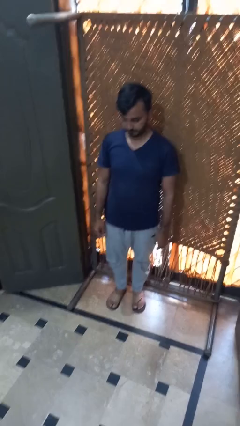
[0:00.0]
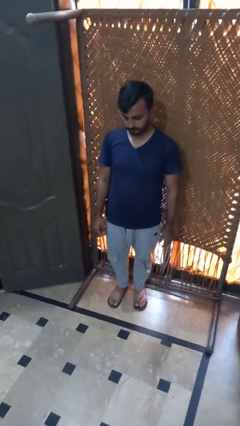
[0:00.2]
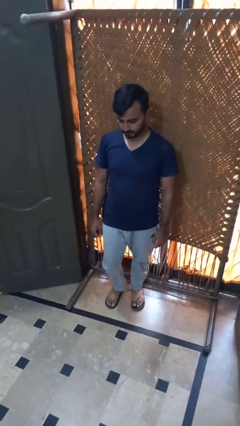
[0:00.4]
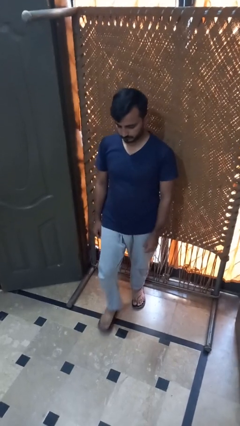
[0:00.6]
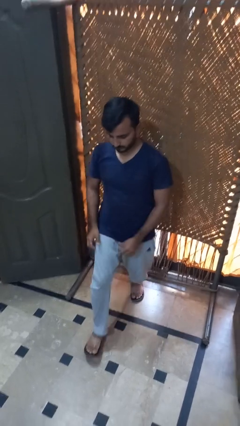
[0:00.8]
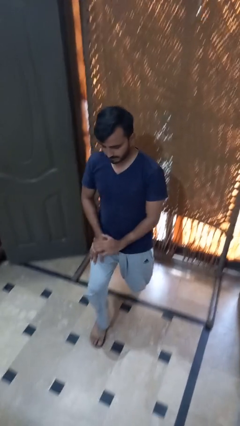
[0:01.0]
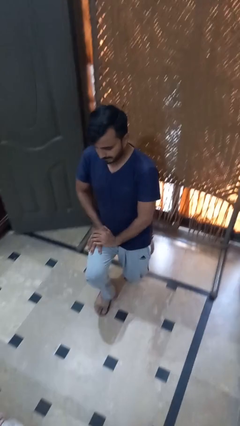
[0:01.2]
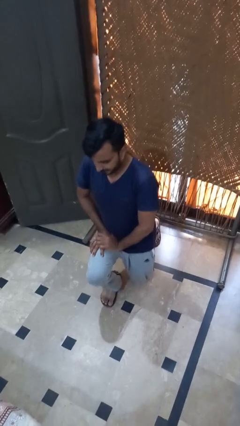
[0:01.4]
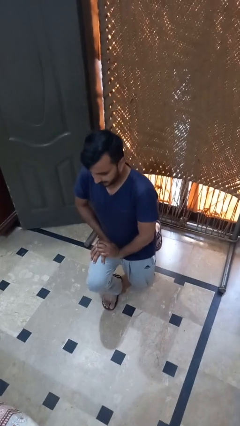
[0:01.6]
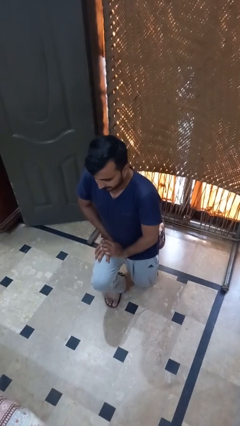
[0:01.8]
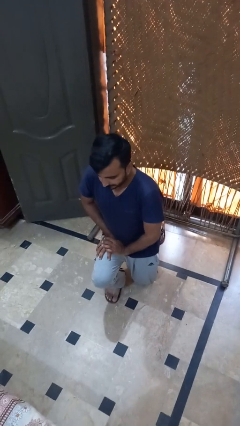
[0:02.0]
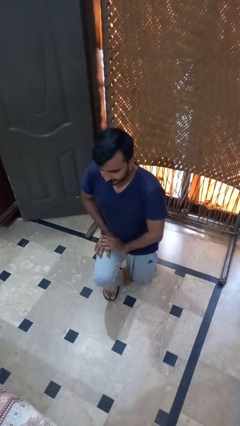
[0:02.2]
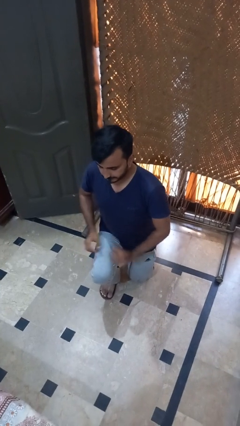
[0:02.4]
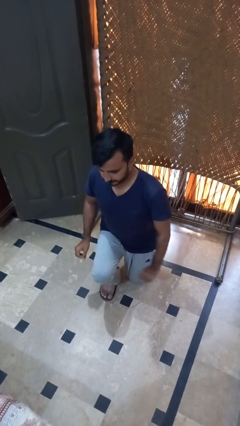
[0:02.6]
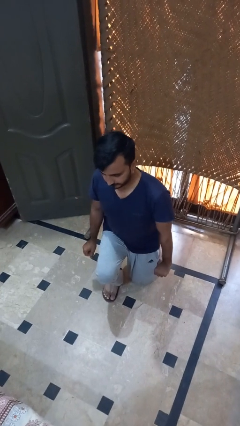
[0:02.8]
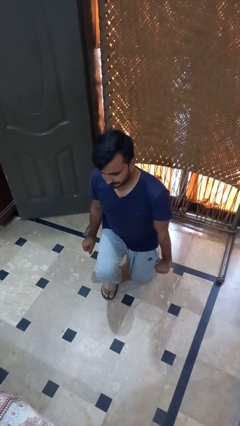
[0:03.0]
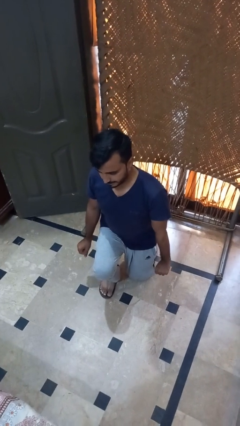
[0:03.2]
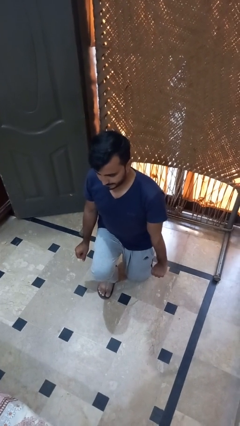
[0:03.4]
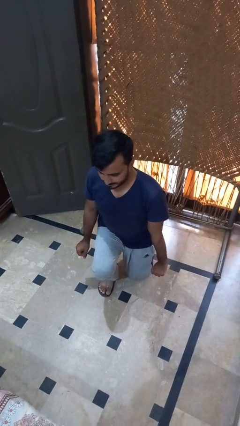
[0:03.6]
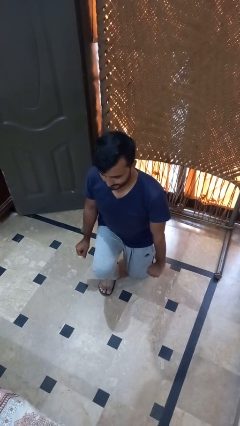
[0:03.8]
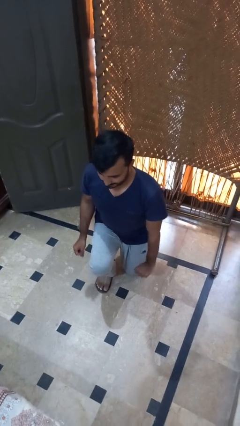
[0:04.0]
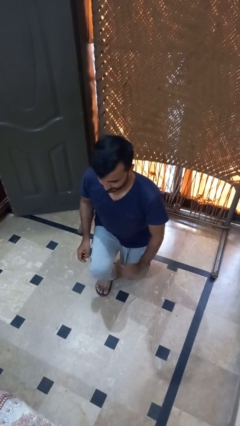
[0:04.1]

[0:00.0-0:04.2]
person exercises with lunges

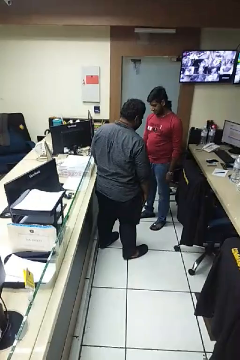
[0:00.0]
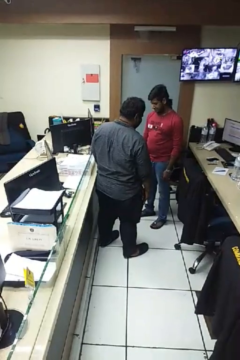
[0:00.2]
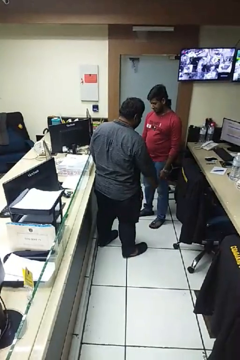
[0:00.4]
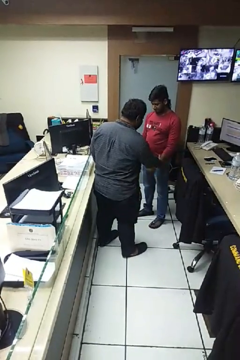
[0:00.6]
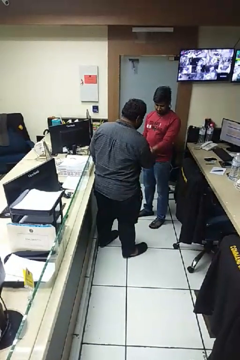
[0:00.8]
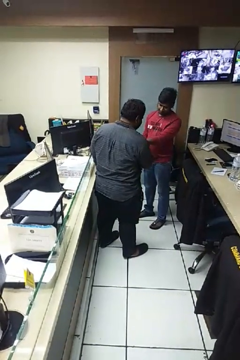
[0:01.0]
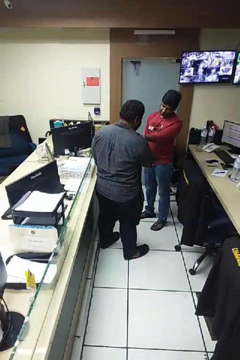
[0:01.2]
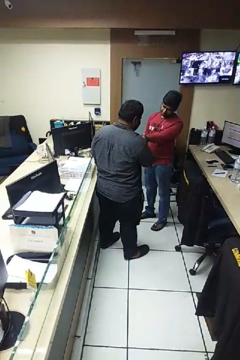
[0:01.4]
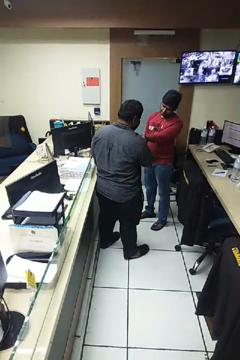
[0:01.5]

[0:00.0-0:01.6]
person grabs person by forearm

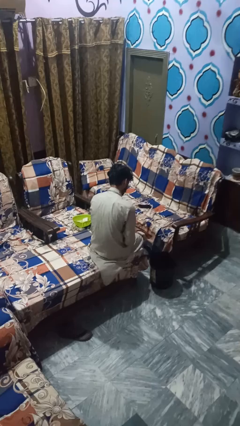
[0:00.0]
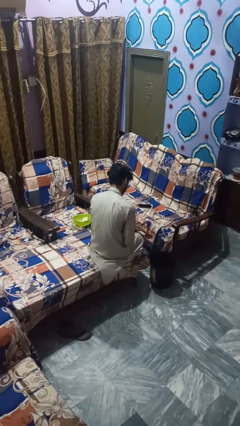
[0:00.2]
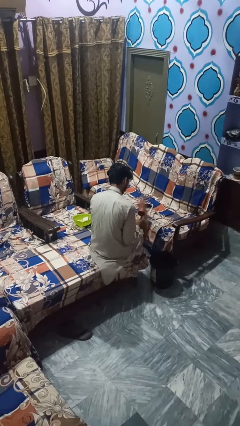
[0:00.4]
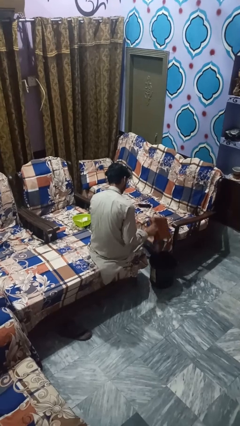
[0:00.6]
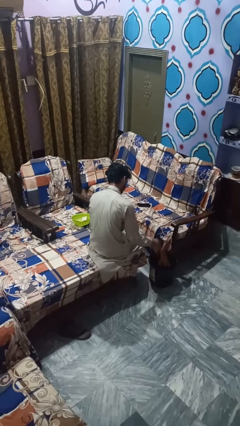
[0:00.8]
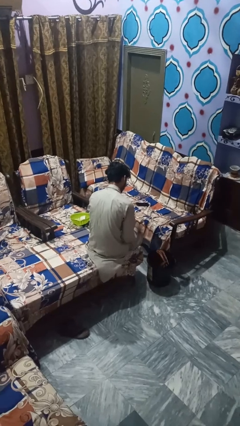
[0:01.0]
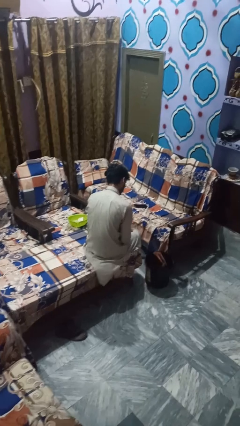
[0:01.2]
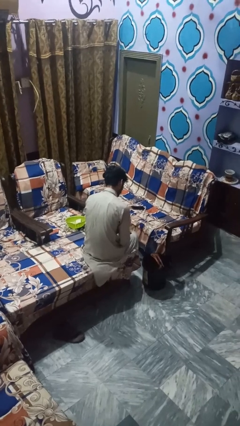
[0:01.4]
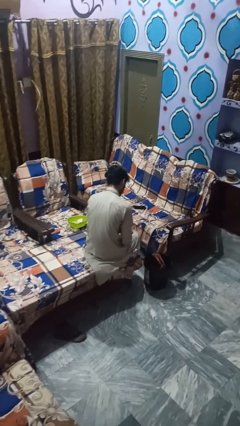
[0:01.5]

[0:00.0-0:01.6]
person puts object into basket

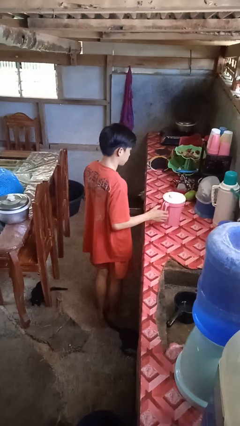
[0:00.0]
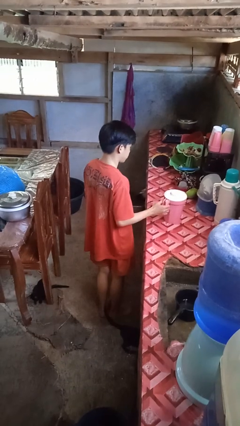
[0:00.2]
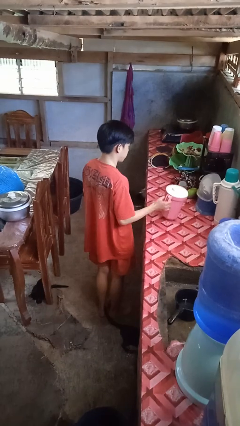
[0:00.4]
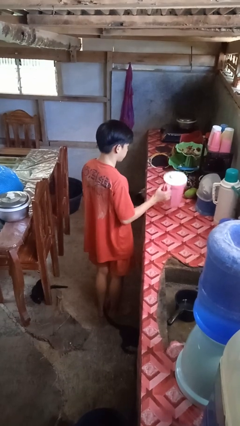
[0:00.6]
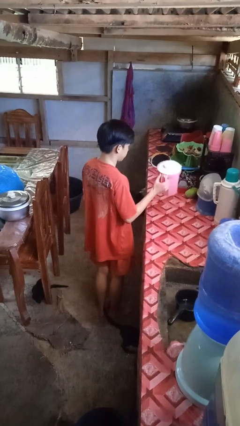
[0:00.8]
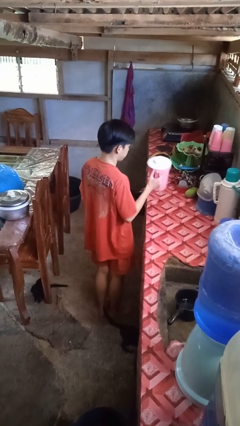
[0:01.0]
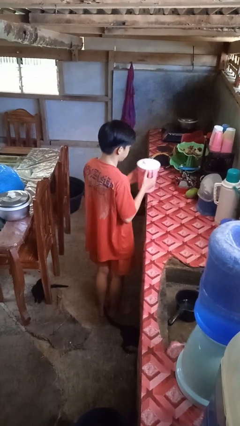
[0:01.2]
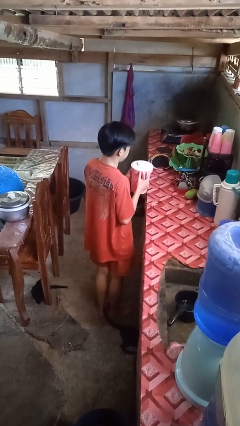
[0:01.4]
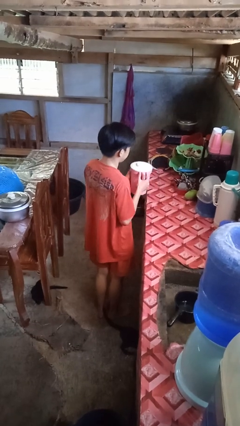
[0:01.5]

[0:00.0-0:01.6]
person picks up object from countertop

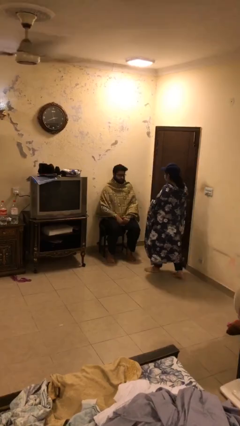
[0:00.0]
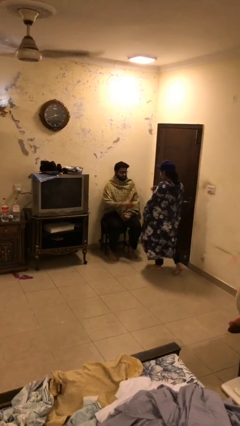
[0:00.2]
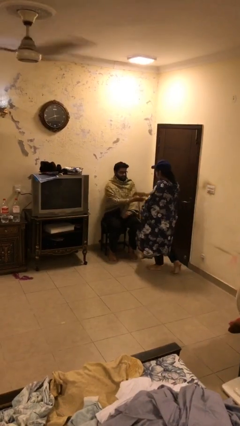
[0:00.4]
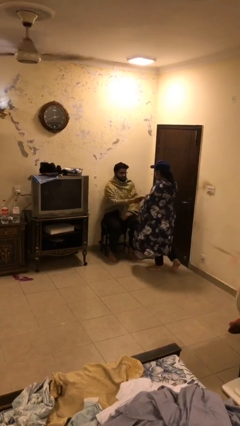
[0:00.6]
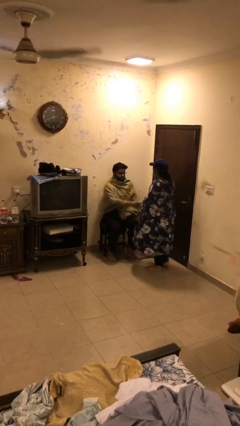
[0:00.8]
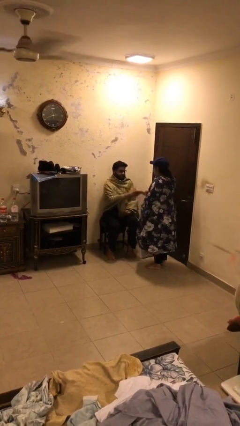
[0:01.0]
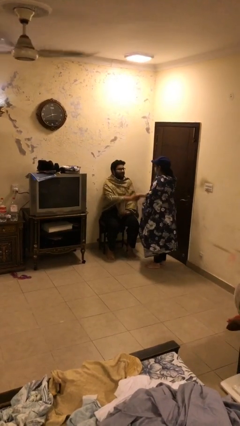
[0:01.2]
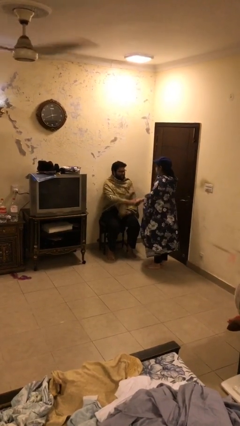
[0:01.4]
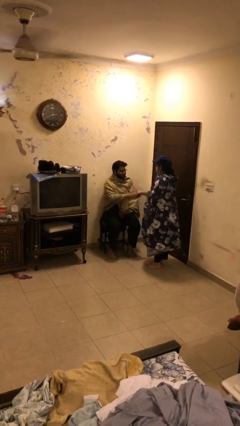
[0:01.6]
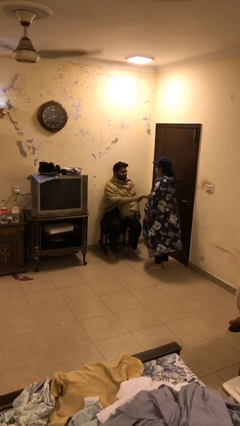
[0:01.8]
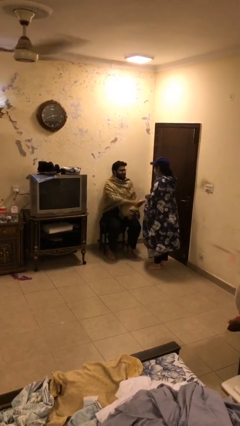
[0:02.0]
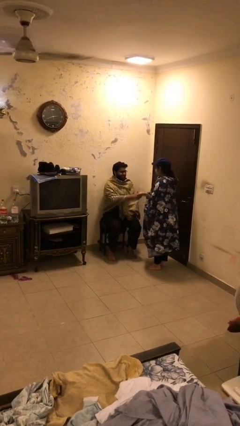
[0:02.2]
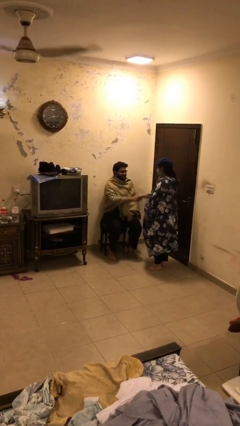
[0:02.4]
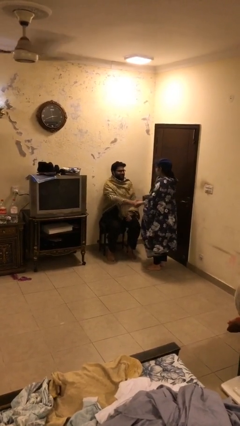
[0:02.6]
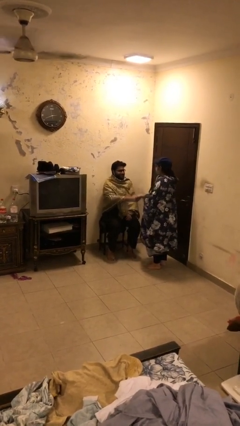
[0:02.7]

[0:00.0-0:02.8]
person shakes hand

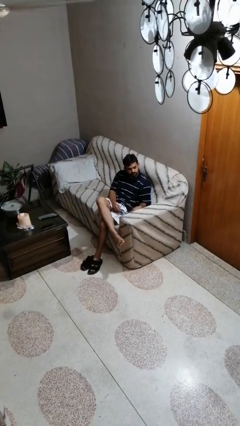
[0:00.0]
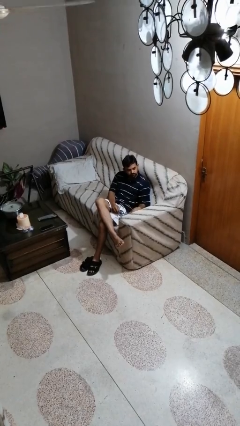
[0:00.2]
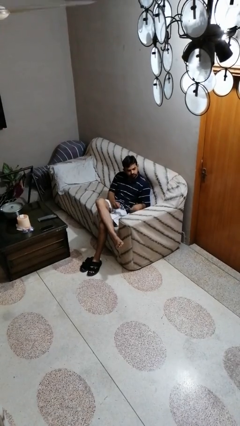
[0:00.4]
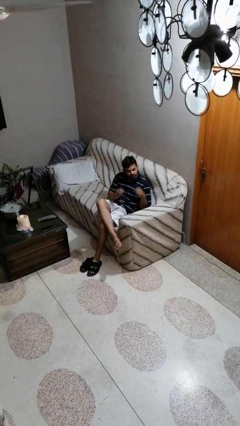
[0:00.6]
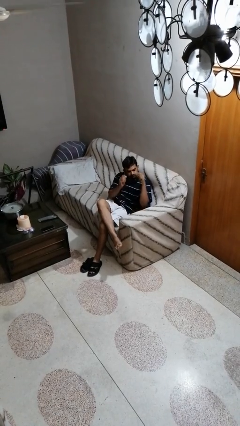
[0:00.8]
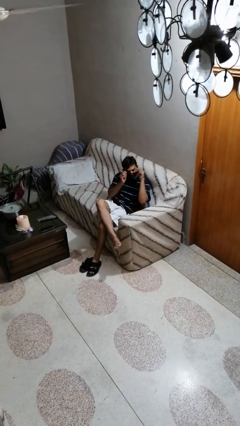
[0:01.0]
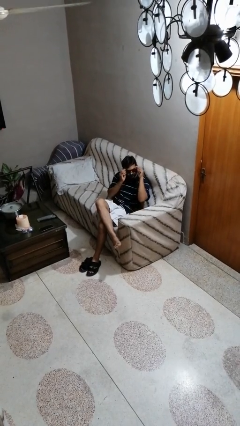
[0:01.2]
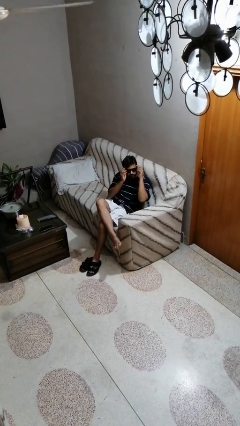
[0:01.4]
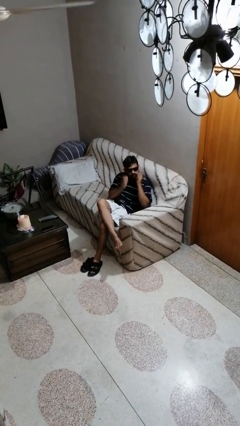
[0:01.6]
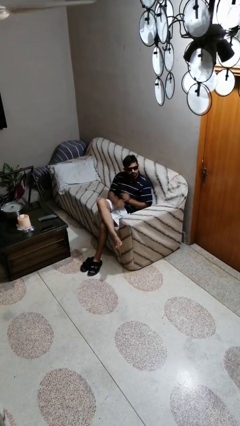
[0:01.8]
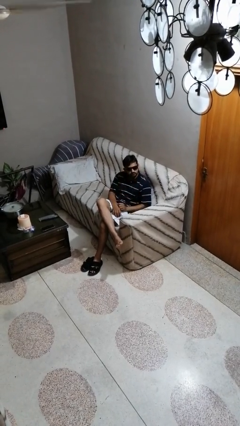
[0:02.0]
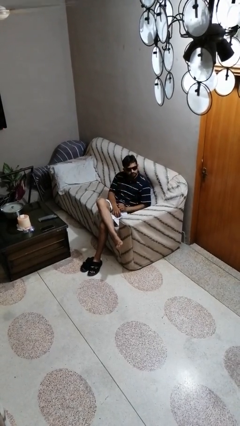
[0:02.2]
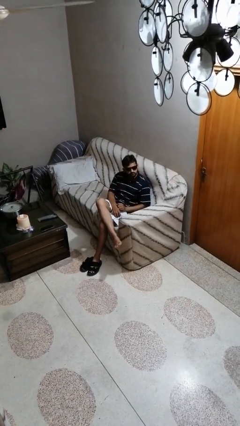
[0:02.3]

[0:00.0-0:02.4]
person puts on sunglasses

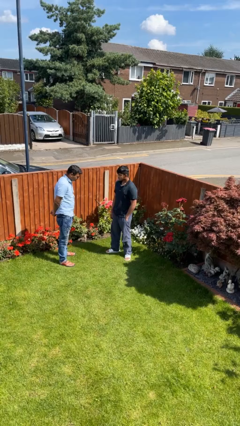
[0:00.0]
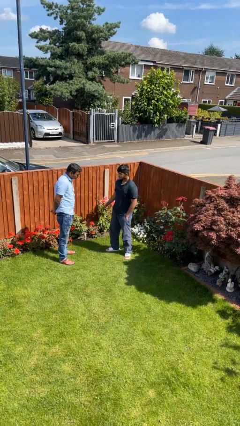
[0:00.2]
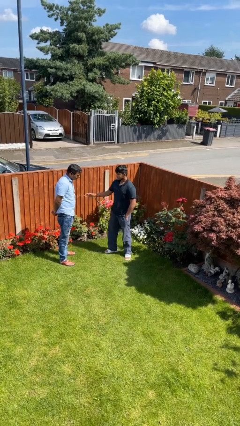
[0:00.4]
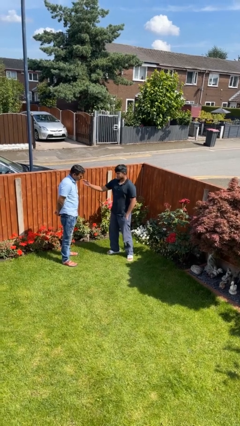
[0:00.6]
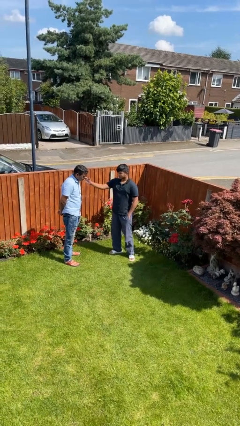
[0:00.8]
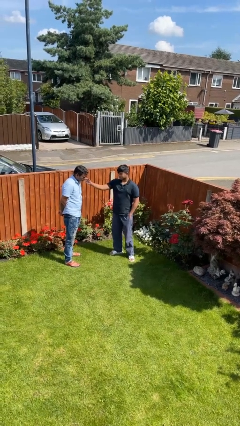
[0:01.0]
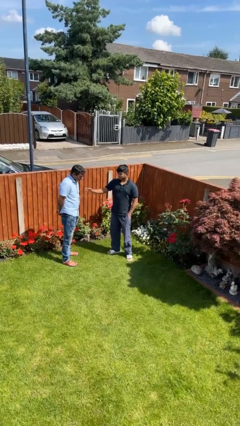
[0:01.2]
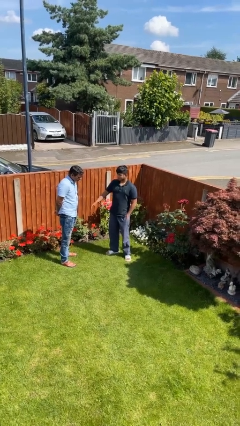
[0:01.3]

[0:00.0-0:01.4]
person touches face of person

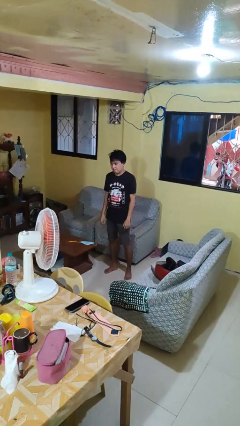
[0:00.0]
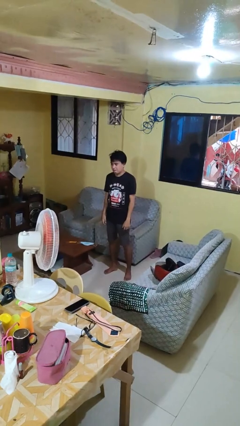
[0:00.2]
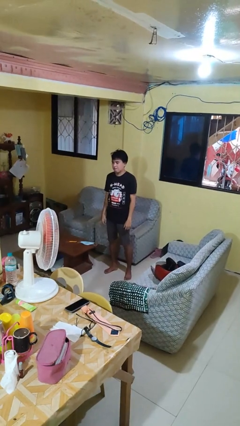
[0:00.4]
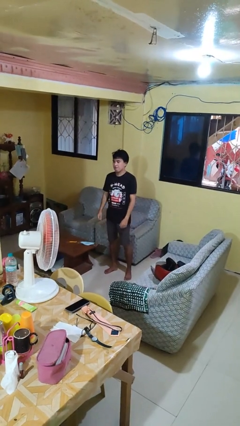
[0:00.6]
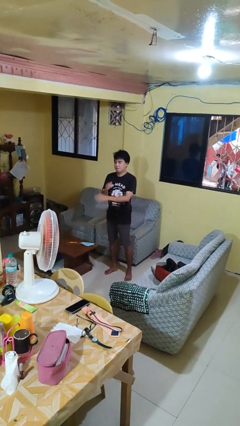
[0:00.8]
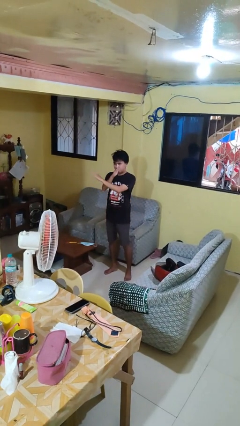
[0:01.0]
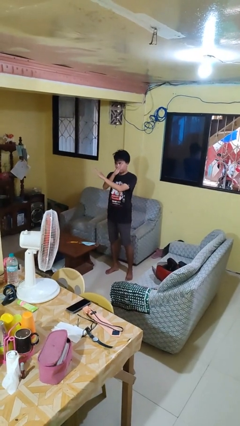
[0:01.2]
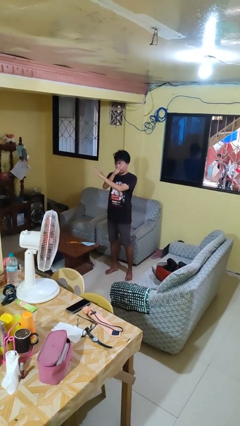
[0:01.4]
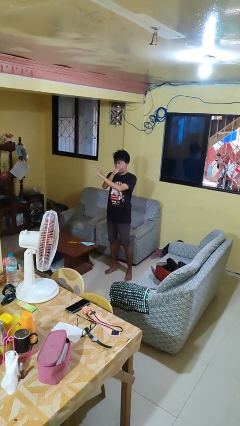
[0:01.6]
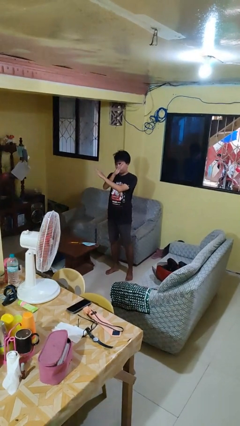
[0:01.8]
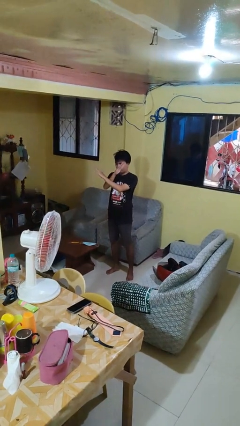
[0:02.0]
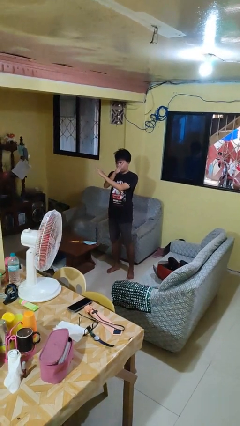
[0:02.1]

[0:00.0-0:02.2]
person gestures arms x
